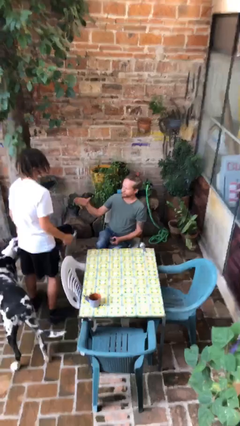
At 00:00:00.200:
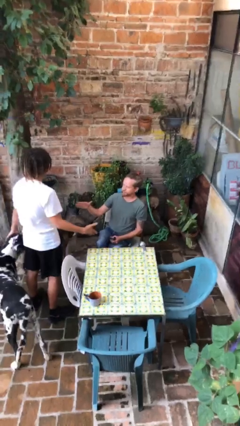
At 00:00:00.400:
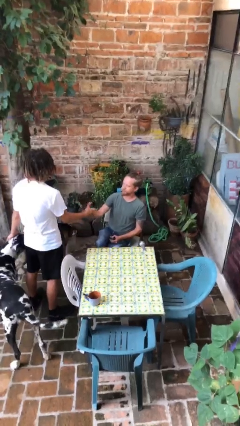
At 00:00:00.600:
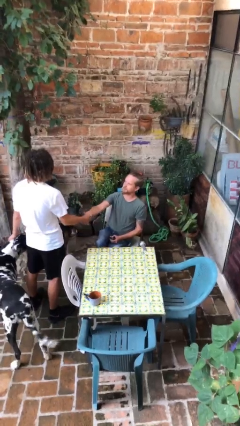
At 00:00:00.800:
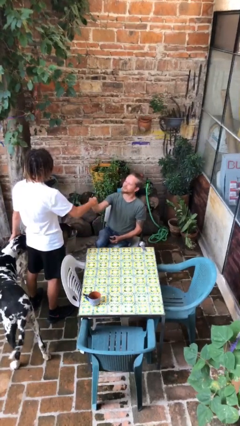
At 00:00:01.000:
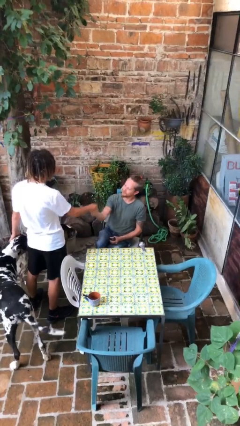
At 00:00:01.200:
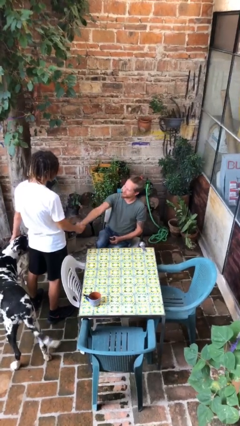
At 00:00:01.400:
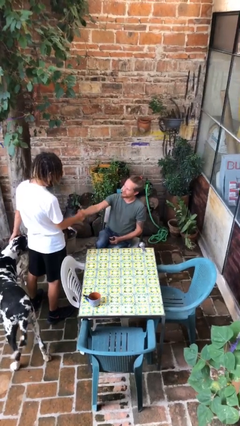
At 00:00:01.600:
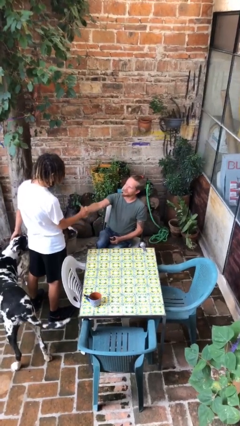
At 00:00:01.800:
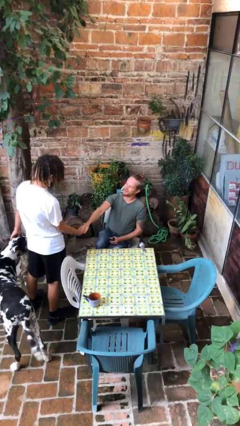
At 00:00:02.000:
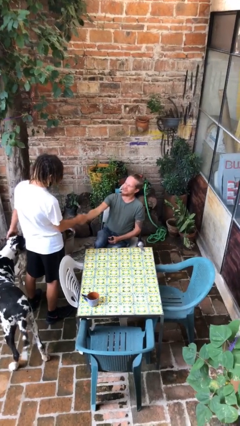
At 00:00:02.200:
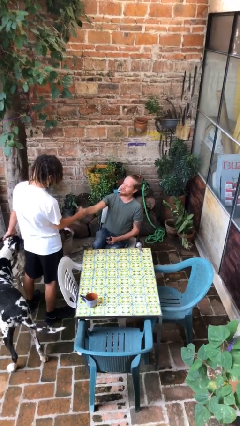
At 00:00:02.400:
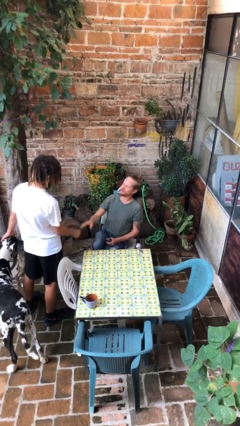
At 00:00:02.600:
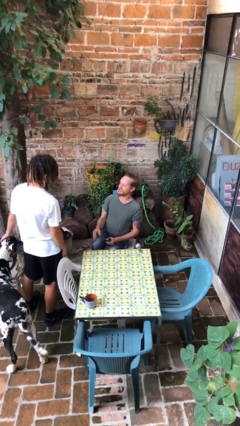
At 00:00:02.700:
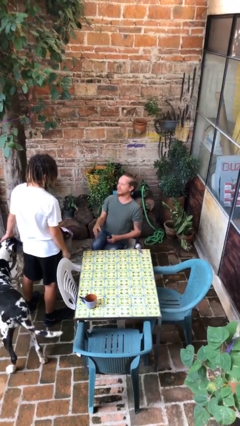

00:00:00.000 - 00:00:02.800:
person shakes hand

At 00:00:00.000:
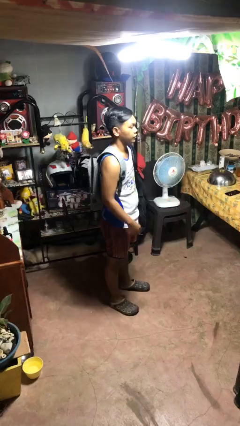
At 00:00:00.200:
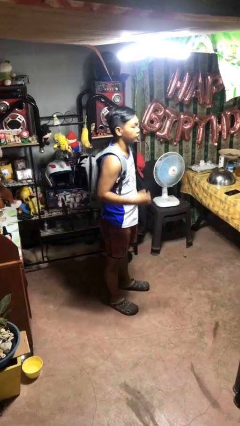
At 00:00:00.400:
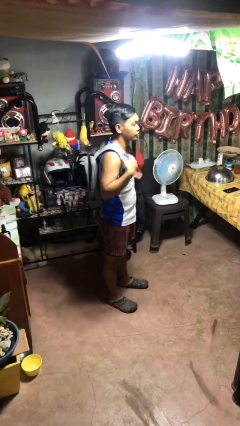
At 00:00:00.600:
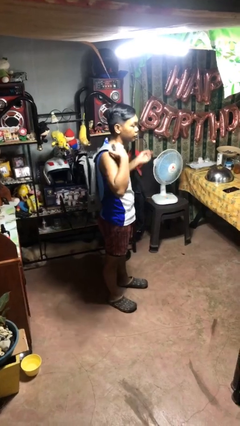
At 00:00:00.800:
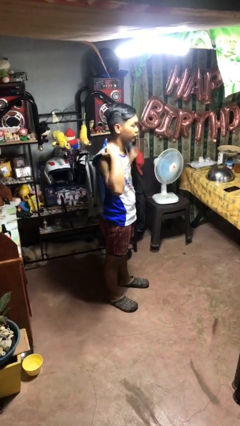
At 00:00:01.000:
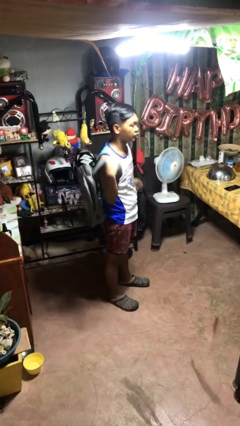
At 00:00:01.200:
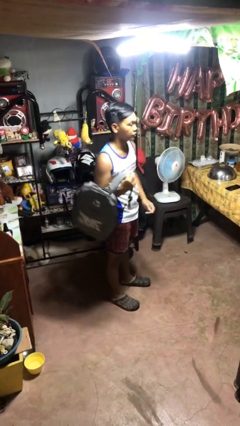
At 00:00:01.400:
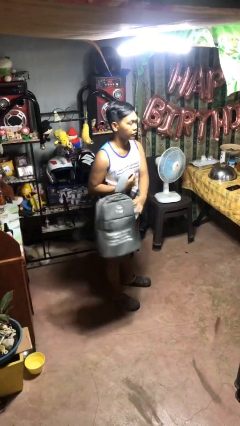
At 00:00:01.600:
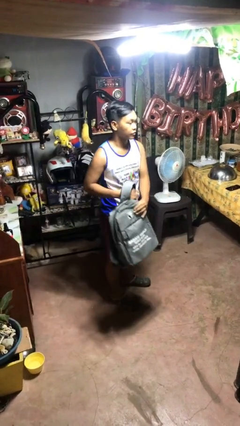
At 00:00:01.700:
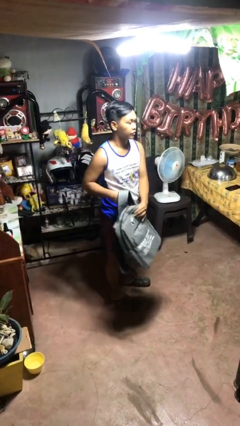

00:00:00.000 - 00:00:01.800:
person takes off backpack

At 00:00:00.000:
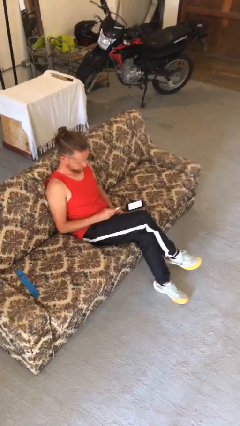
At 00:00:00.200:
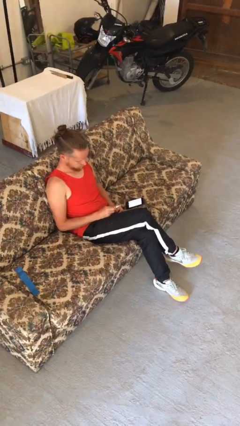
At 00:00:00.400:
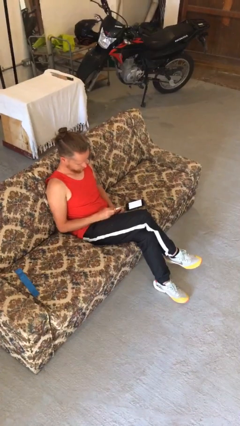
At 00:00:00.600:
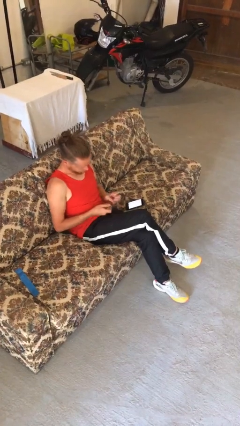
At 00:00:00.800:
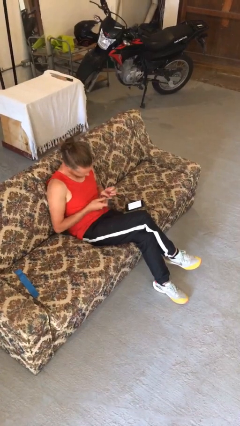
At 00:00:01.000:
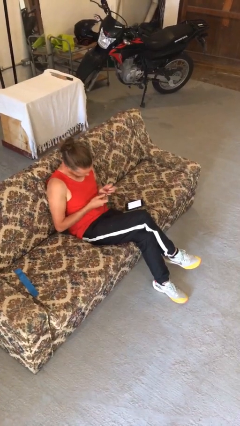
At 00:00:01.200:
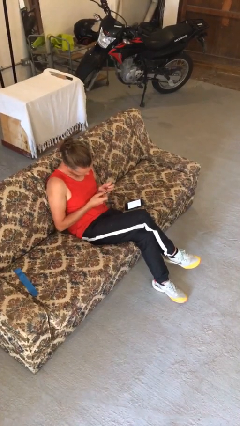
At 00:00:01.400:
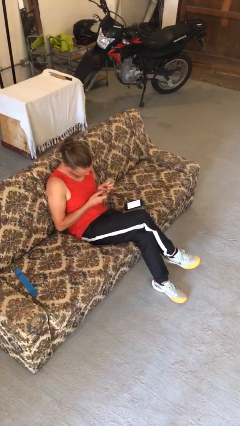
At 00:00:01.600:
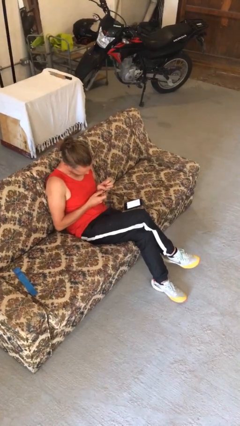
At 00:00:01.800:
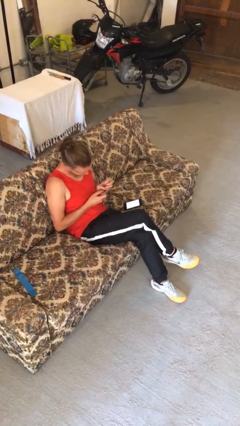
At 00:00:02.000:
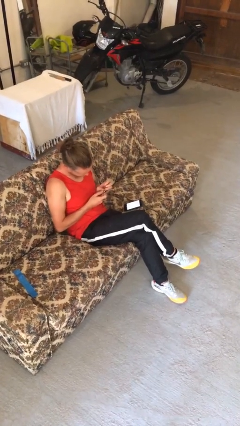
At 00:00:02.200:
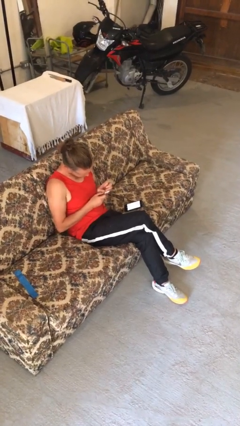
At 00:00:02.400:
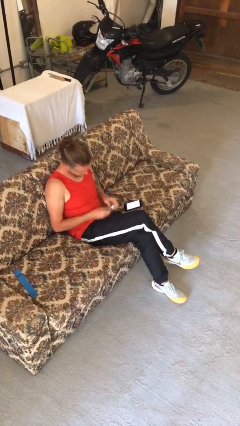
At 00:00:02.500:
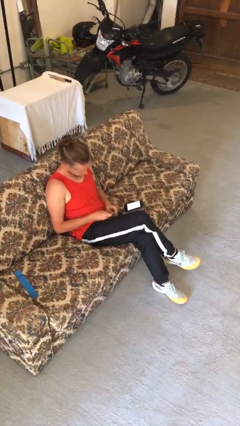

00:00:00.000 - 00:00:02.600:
person files fingernails

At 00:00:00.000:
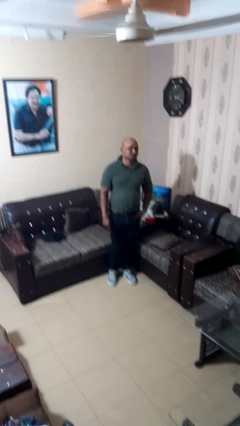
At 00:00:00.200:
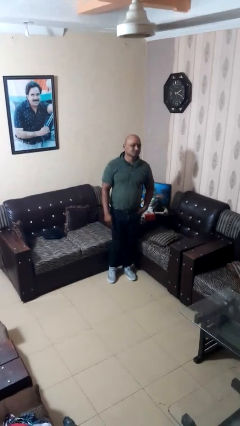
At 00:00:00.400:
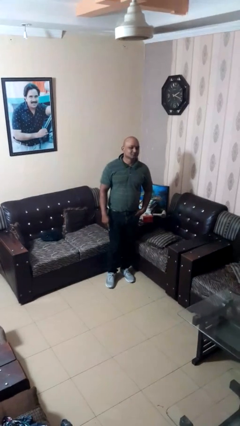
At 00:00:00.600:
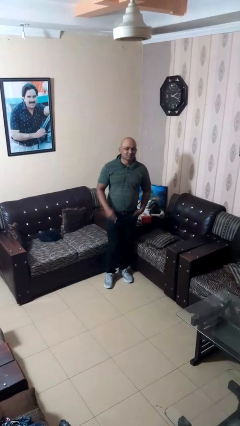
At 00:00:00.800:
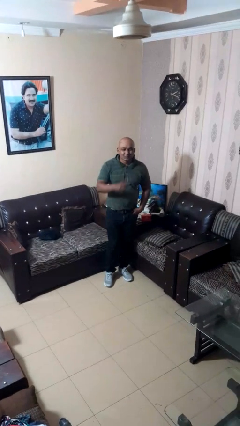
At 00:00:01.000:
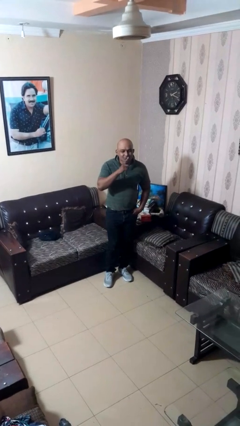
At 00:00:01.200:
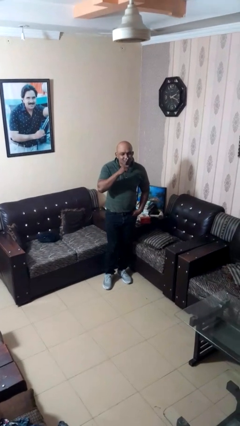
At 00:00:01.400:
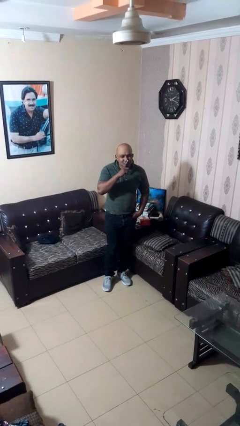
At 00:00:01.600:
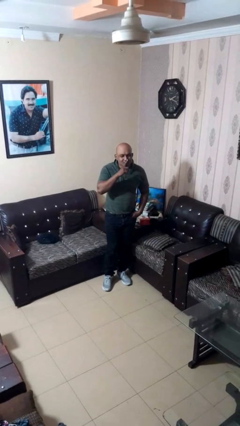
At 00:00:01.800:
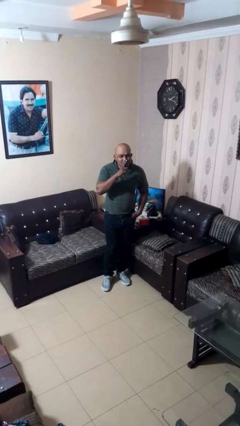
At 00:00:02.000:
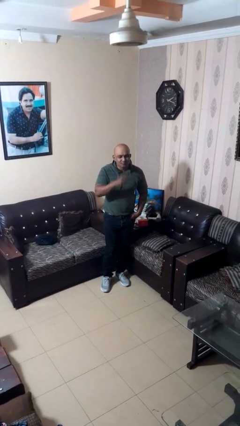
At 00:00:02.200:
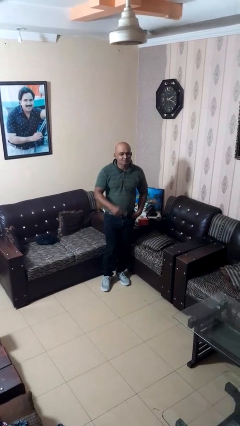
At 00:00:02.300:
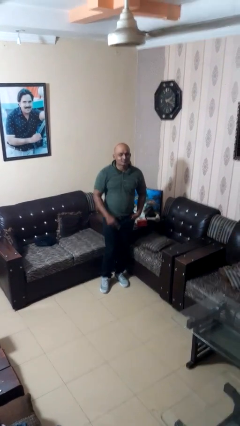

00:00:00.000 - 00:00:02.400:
person gestures be quiet

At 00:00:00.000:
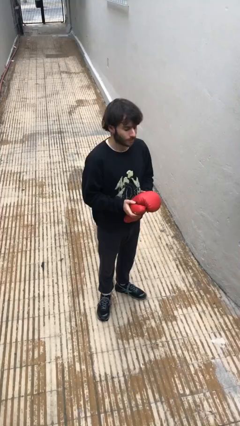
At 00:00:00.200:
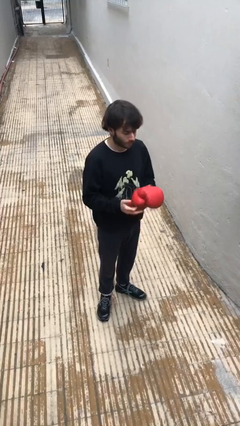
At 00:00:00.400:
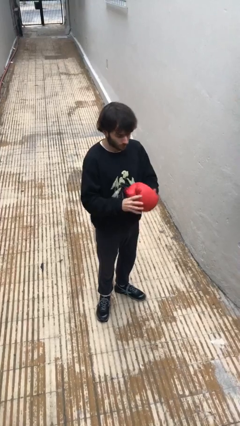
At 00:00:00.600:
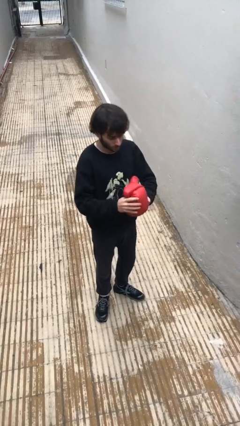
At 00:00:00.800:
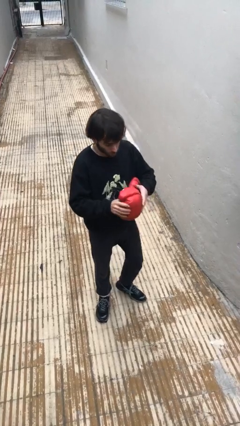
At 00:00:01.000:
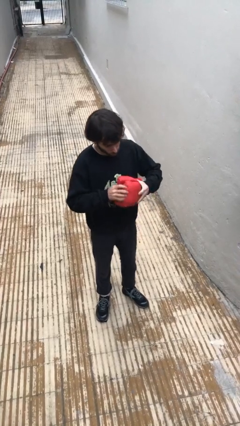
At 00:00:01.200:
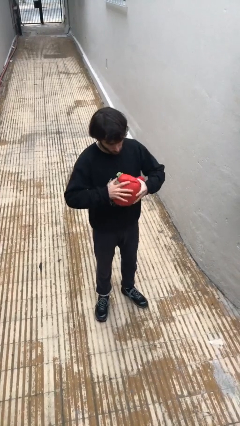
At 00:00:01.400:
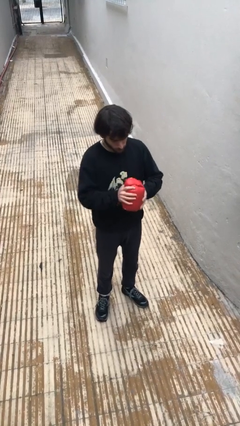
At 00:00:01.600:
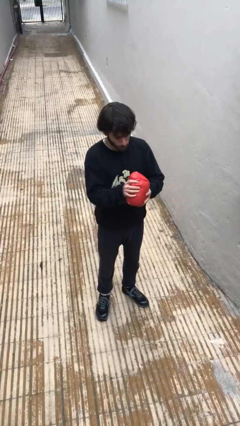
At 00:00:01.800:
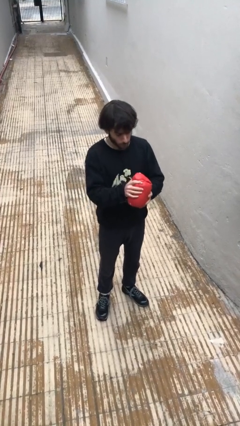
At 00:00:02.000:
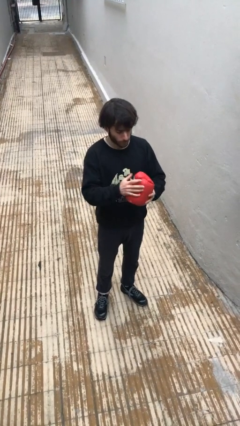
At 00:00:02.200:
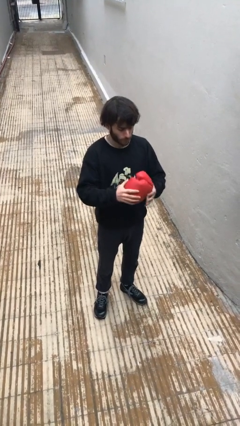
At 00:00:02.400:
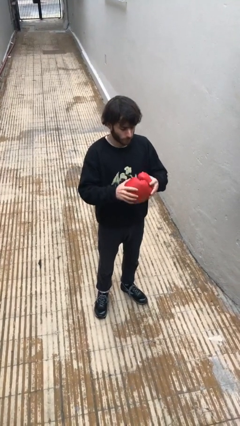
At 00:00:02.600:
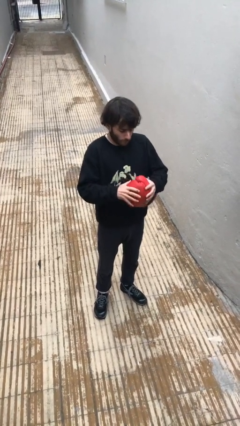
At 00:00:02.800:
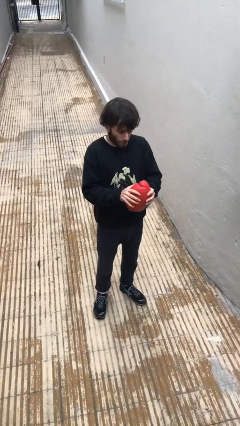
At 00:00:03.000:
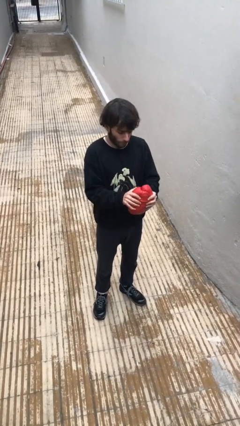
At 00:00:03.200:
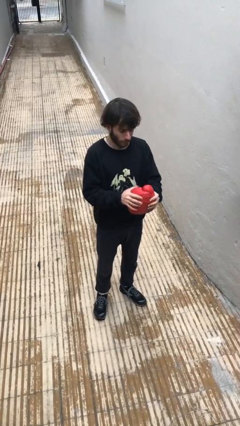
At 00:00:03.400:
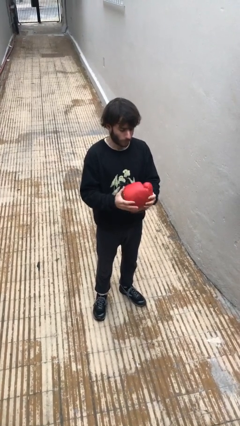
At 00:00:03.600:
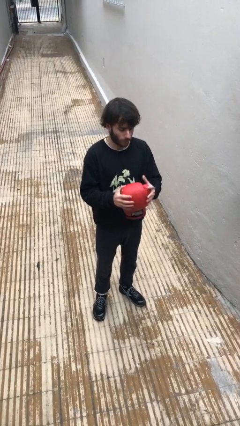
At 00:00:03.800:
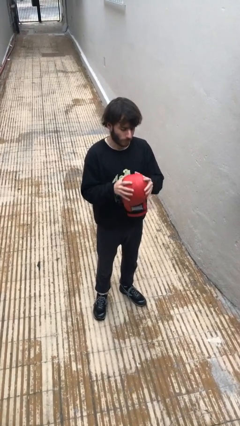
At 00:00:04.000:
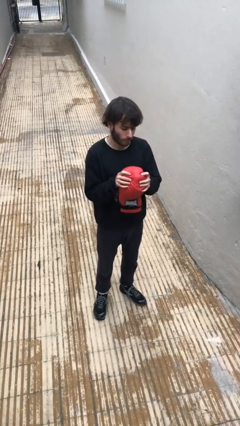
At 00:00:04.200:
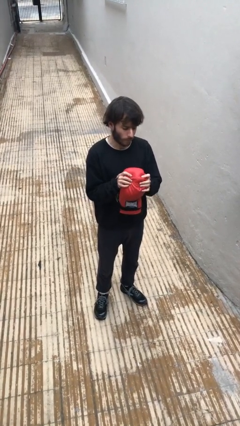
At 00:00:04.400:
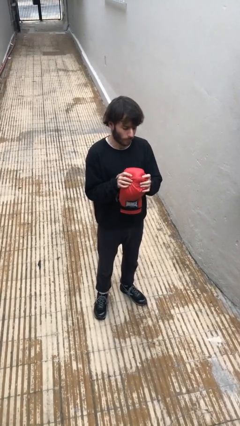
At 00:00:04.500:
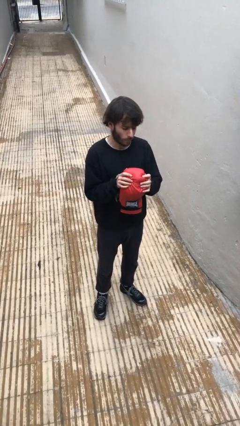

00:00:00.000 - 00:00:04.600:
person squeezes object

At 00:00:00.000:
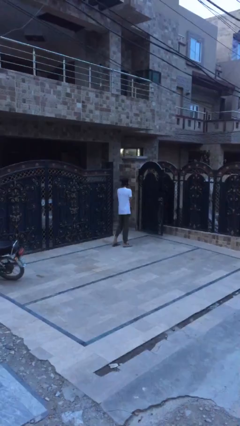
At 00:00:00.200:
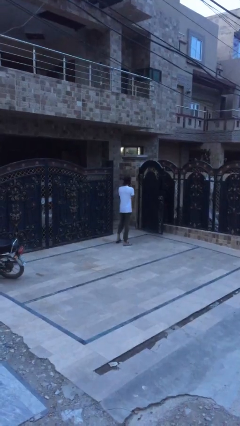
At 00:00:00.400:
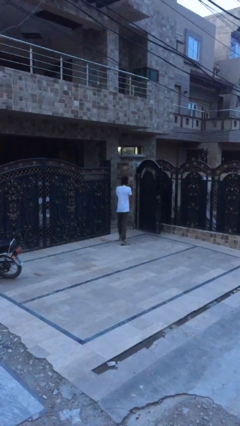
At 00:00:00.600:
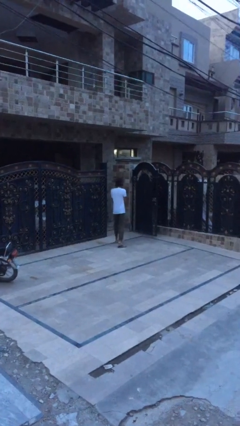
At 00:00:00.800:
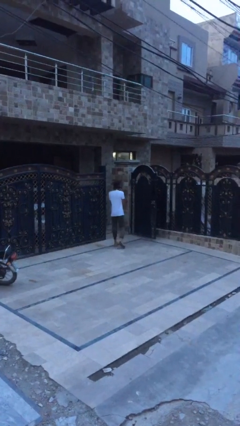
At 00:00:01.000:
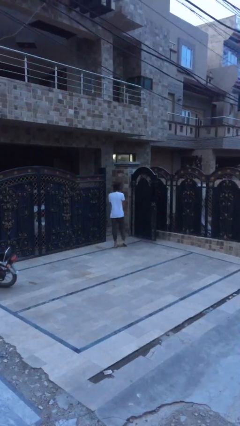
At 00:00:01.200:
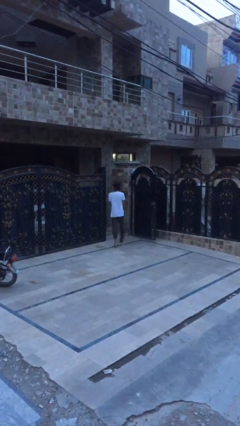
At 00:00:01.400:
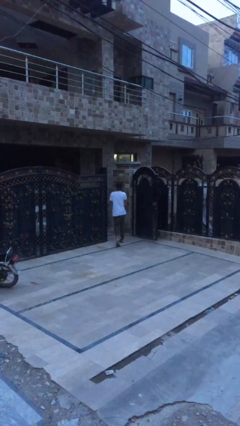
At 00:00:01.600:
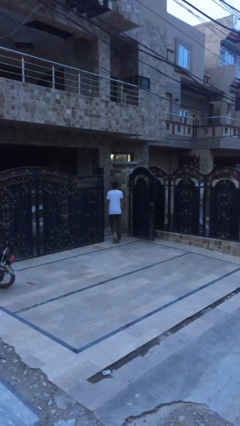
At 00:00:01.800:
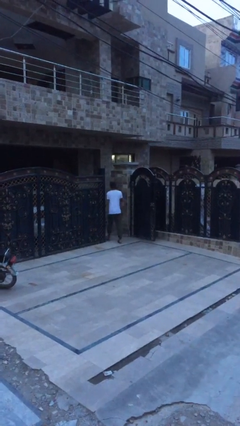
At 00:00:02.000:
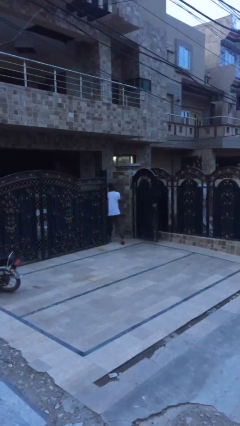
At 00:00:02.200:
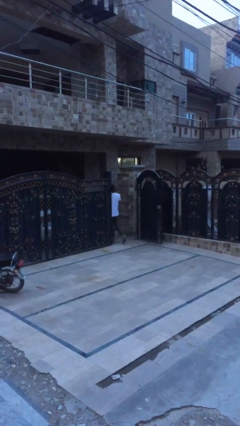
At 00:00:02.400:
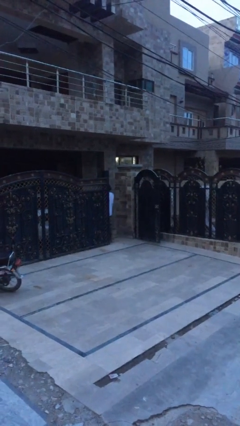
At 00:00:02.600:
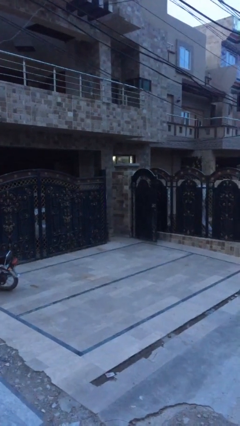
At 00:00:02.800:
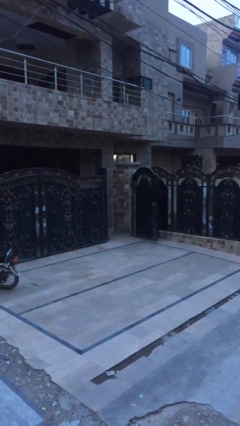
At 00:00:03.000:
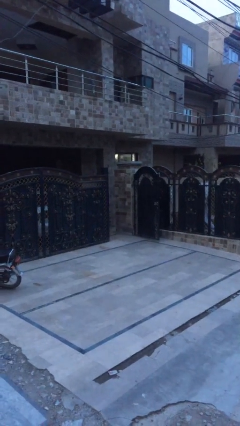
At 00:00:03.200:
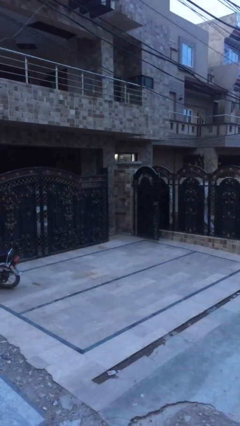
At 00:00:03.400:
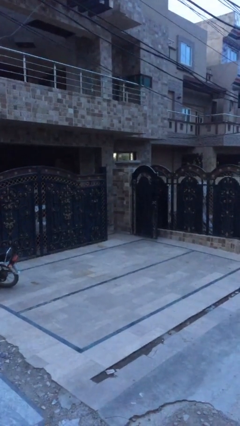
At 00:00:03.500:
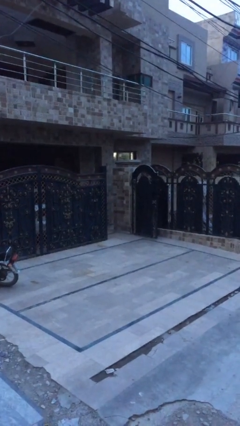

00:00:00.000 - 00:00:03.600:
person exits scene through structure
